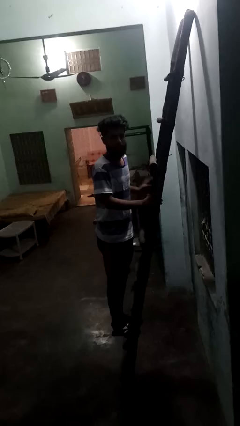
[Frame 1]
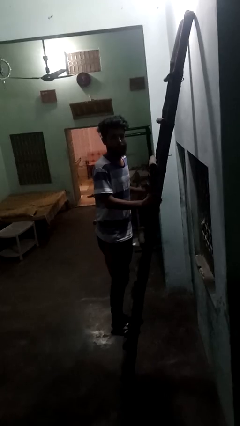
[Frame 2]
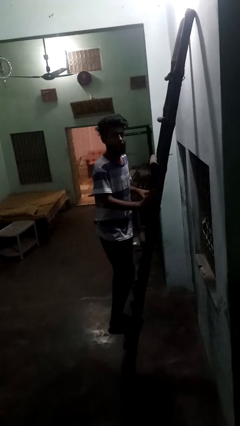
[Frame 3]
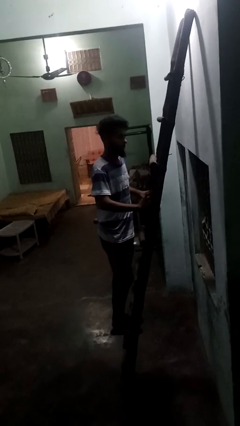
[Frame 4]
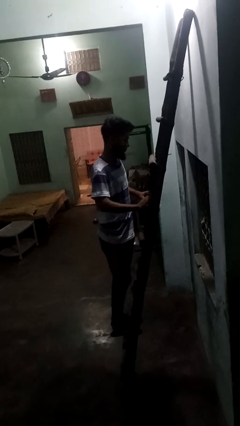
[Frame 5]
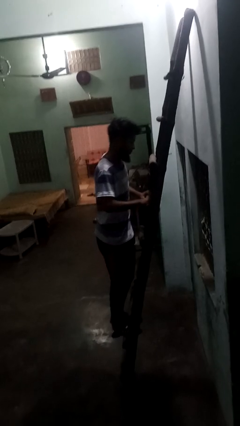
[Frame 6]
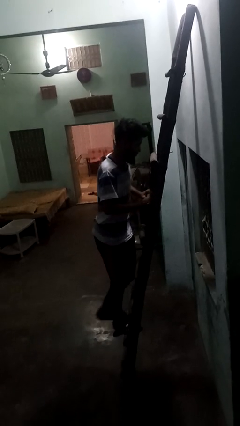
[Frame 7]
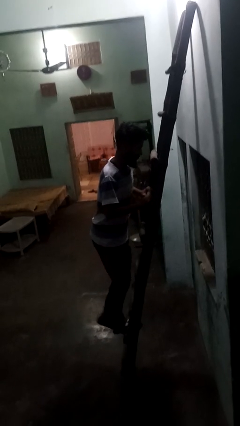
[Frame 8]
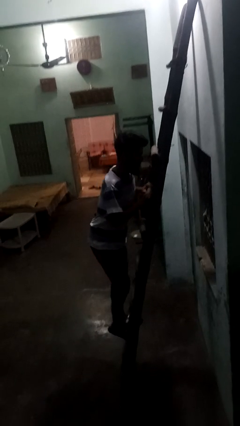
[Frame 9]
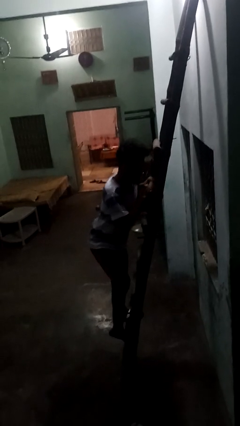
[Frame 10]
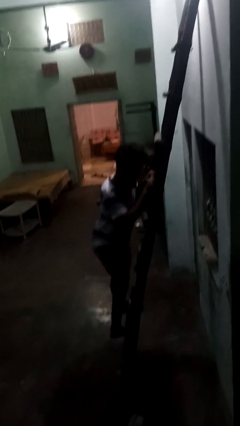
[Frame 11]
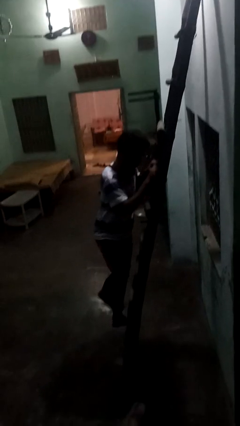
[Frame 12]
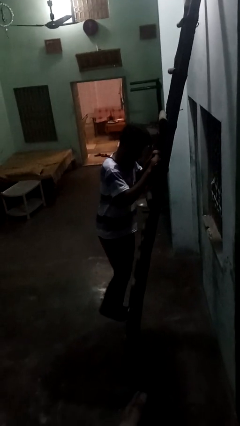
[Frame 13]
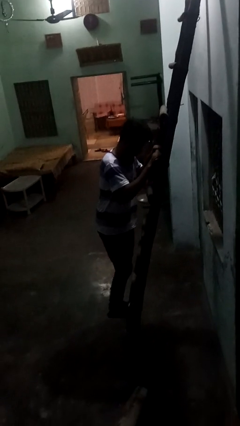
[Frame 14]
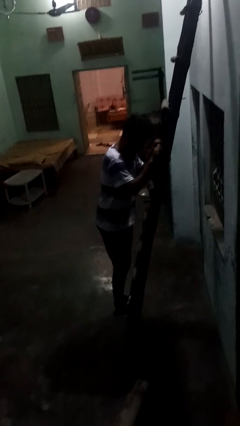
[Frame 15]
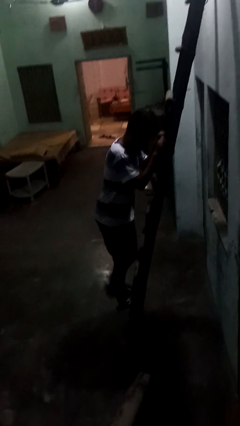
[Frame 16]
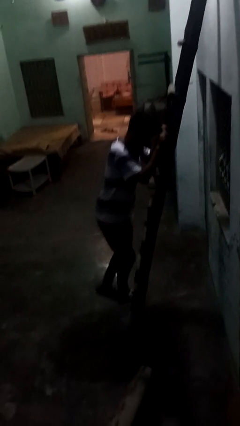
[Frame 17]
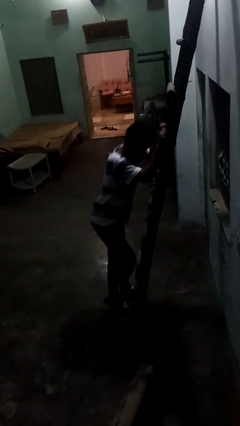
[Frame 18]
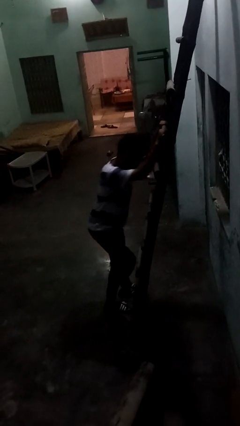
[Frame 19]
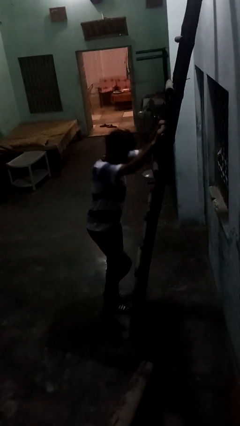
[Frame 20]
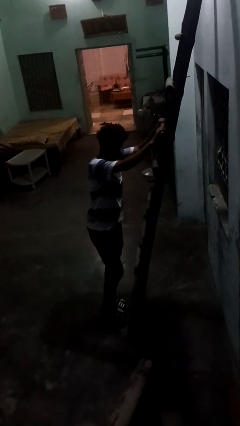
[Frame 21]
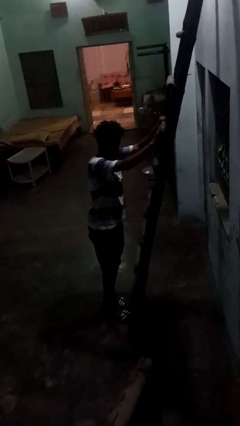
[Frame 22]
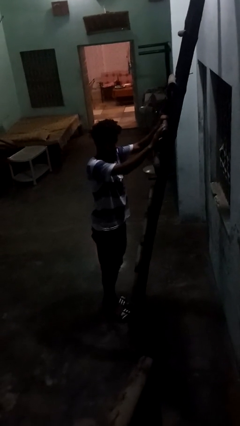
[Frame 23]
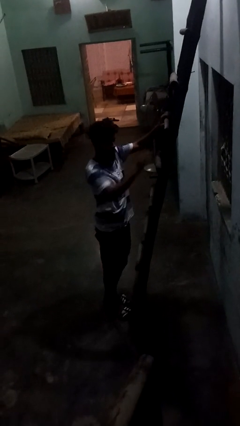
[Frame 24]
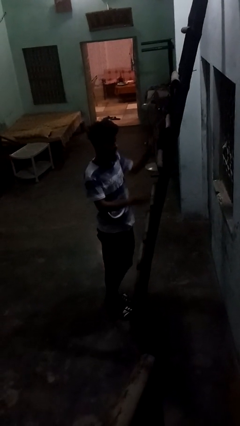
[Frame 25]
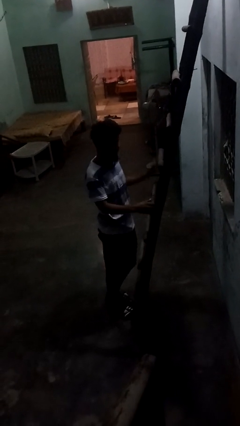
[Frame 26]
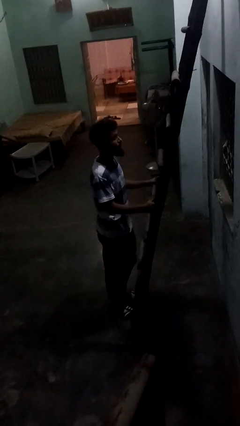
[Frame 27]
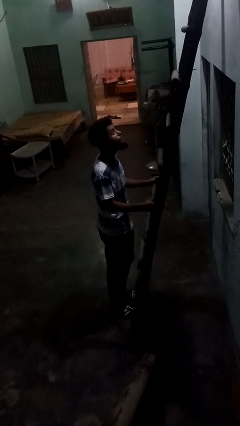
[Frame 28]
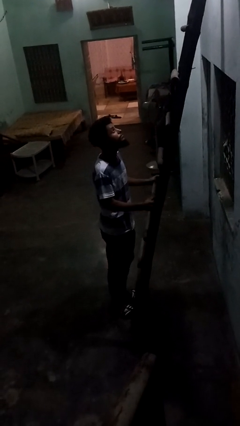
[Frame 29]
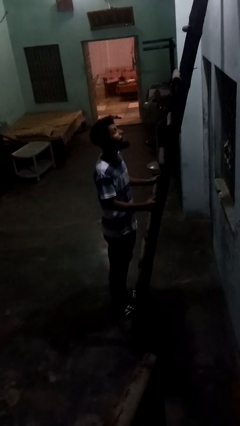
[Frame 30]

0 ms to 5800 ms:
person climbs down ladder

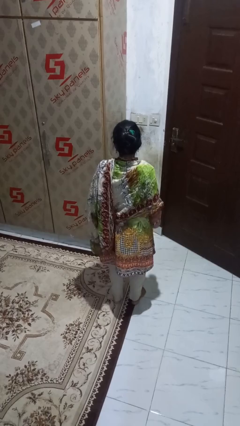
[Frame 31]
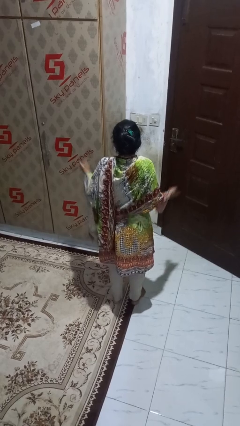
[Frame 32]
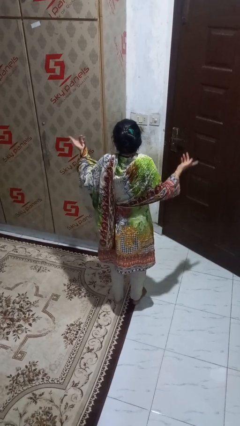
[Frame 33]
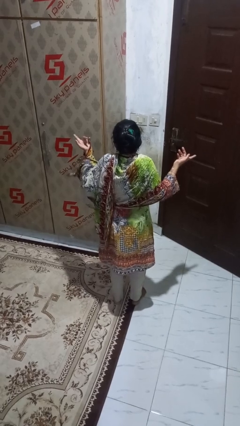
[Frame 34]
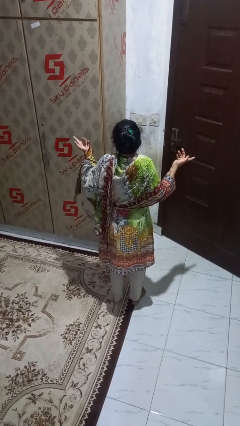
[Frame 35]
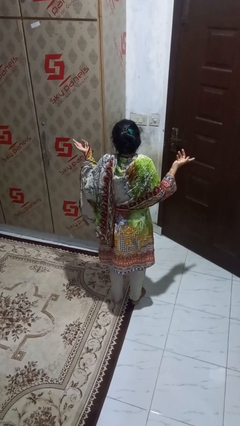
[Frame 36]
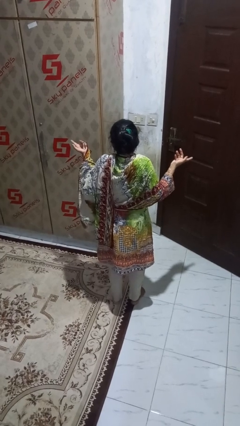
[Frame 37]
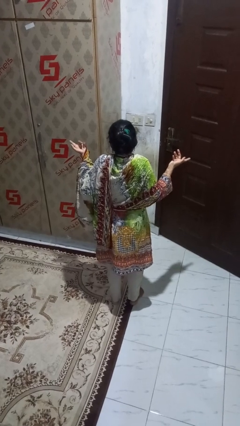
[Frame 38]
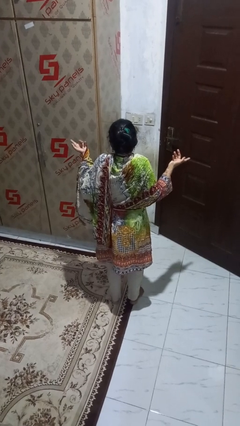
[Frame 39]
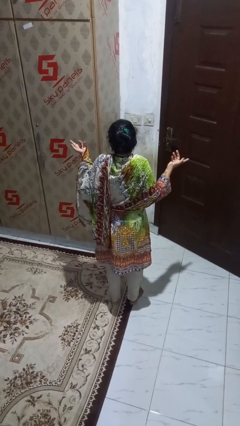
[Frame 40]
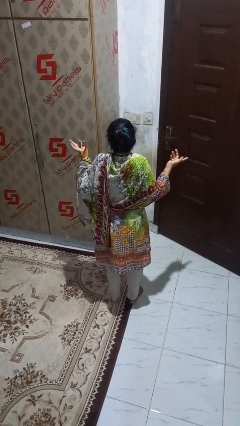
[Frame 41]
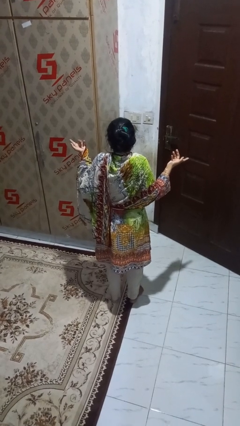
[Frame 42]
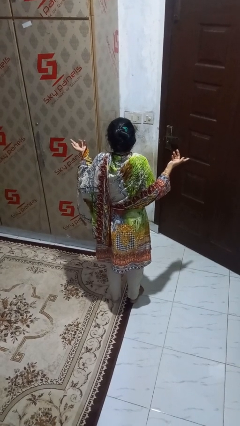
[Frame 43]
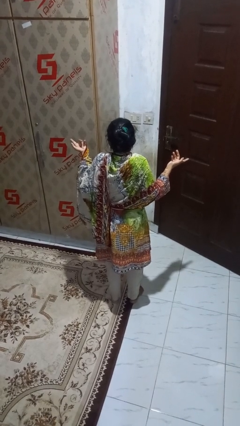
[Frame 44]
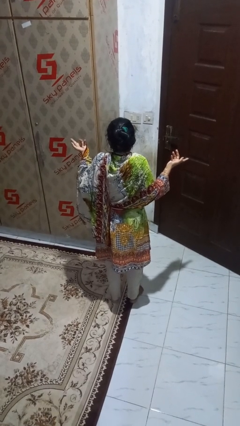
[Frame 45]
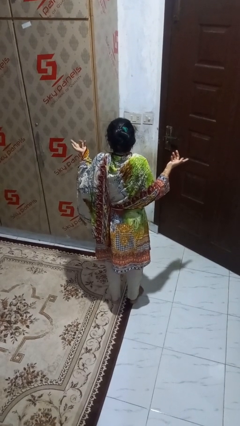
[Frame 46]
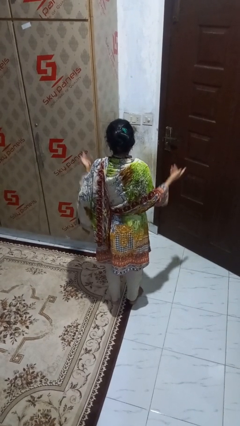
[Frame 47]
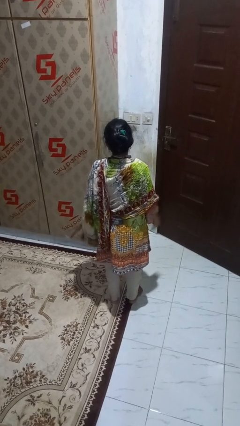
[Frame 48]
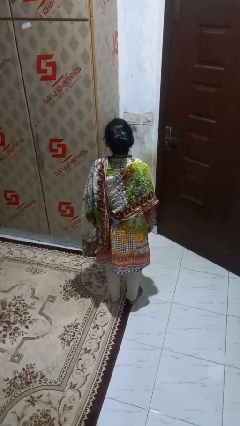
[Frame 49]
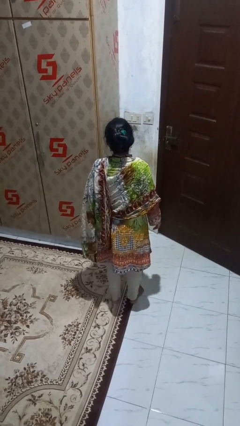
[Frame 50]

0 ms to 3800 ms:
person shrugs

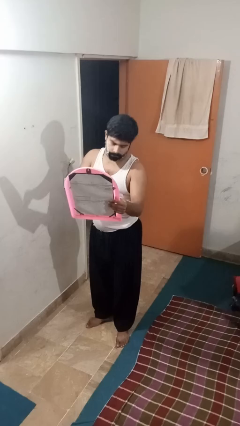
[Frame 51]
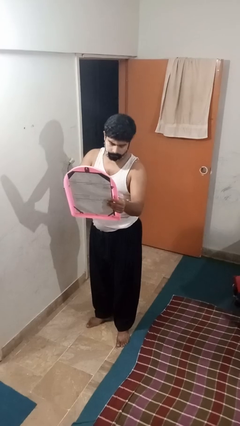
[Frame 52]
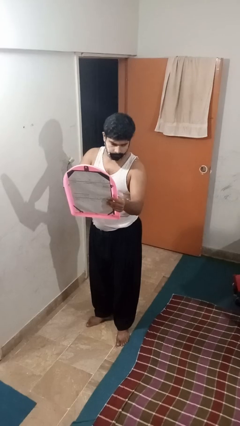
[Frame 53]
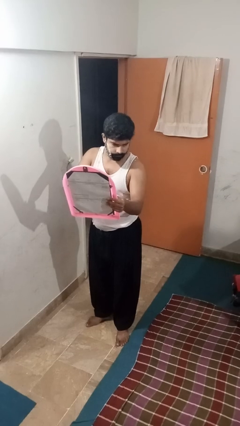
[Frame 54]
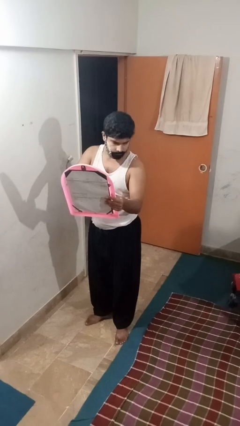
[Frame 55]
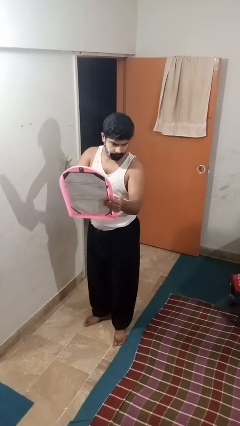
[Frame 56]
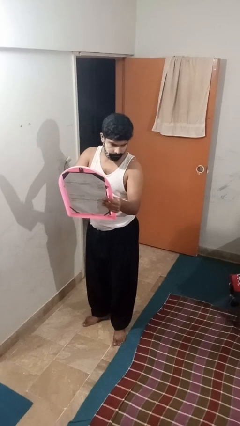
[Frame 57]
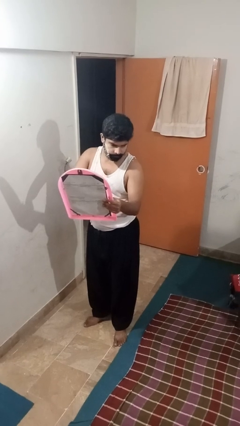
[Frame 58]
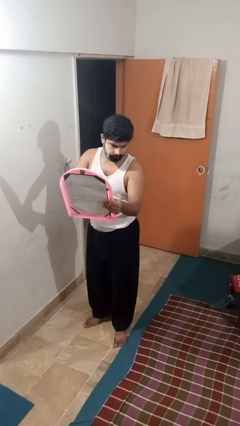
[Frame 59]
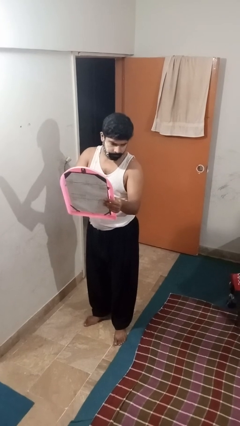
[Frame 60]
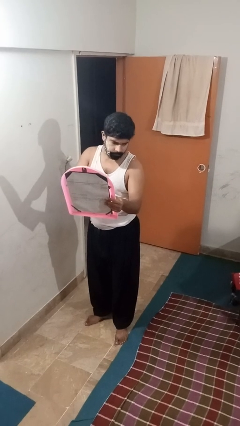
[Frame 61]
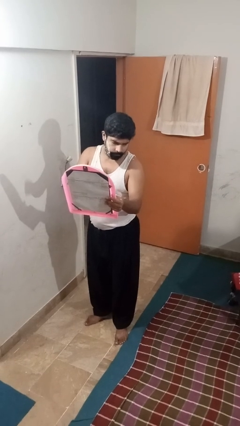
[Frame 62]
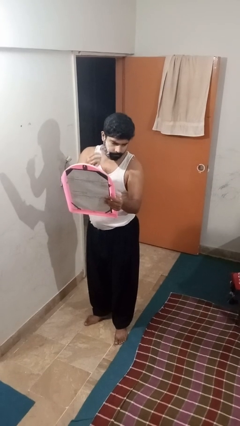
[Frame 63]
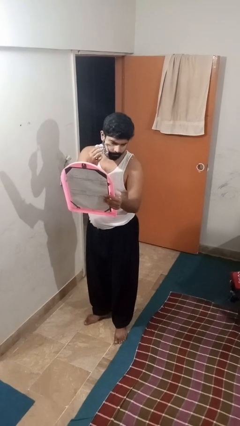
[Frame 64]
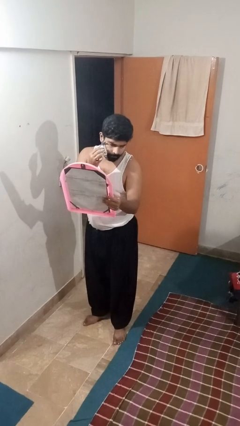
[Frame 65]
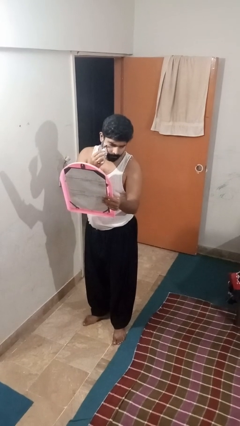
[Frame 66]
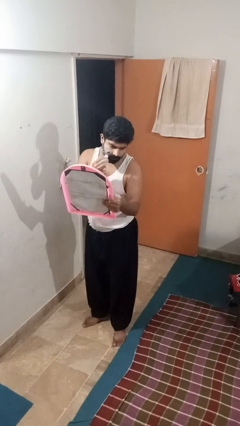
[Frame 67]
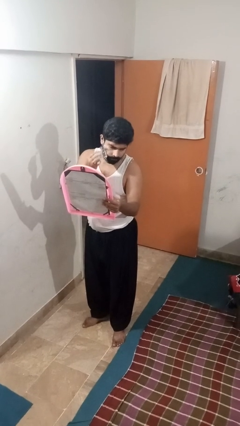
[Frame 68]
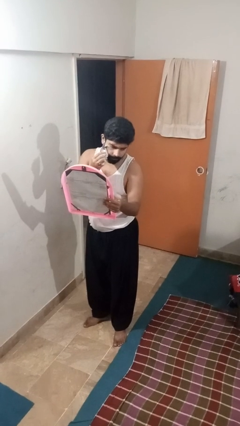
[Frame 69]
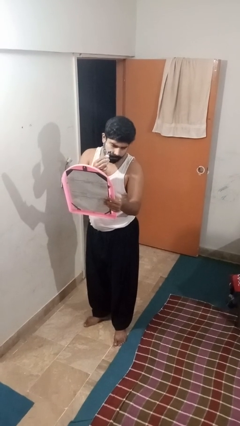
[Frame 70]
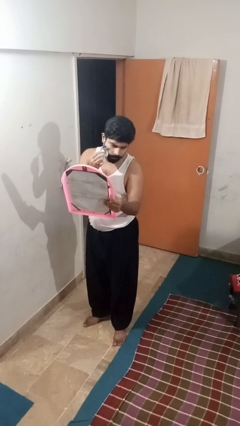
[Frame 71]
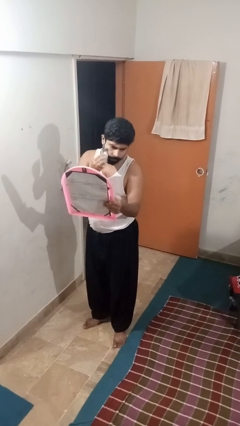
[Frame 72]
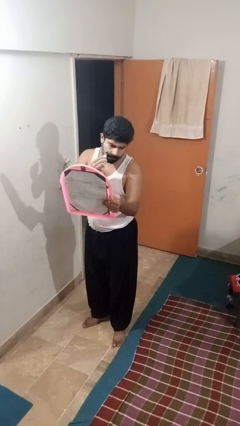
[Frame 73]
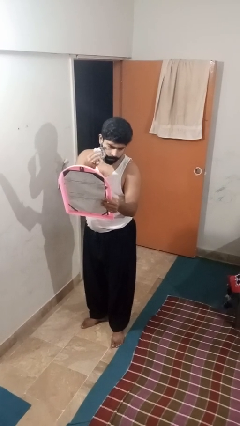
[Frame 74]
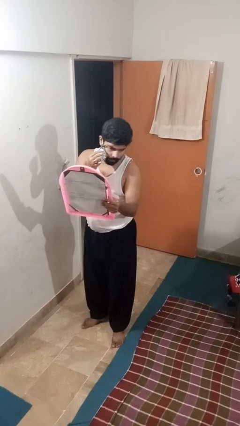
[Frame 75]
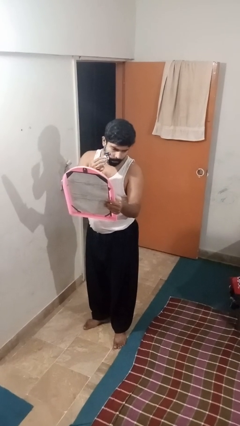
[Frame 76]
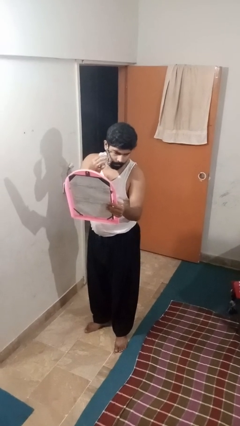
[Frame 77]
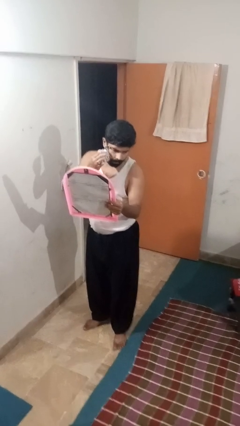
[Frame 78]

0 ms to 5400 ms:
person shaves face

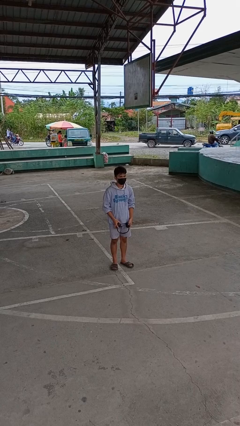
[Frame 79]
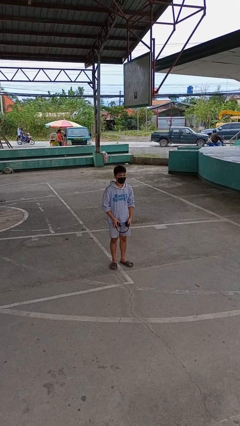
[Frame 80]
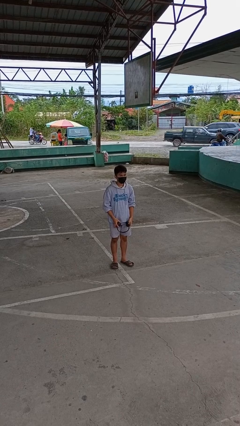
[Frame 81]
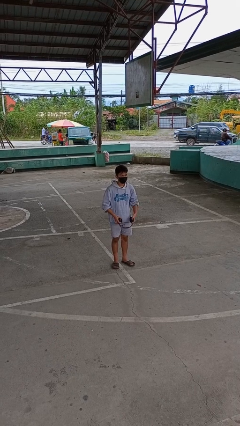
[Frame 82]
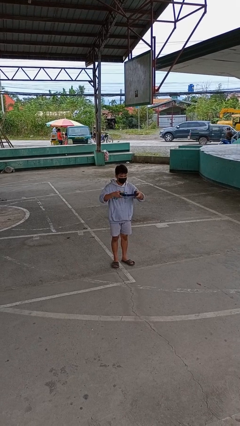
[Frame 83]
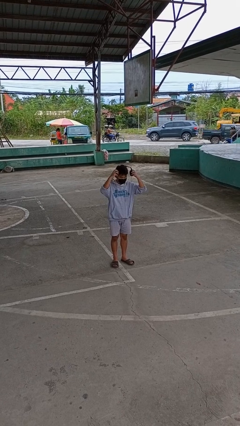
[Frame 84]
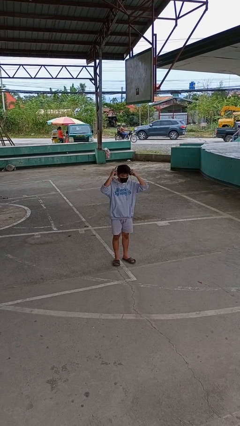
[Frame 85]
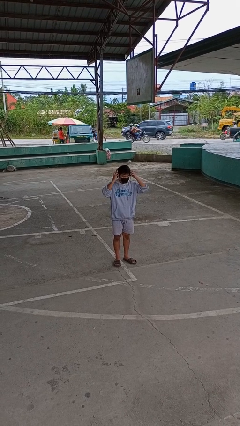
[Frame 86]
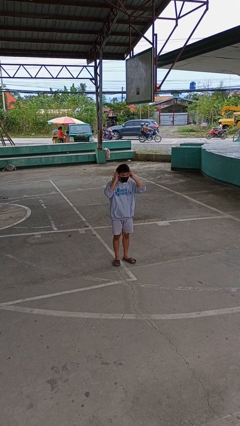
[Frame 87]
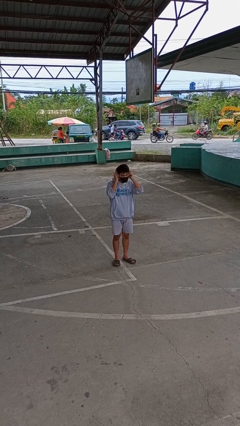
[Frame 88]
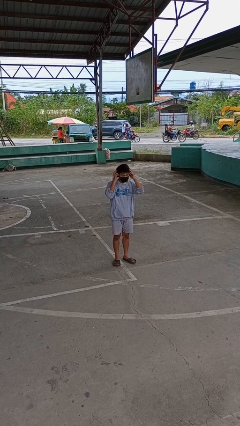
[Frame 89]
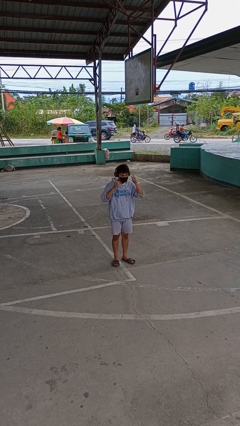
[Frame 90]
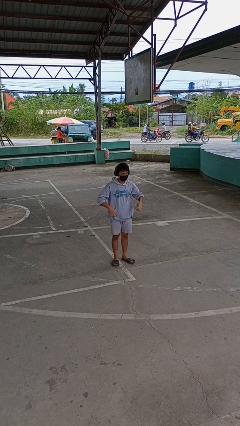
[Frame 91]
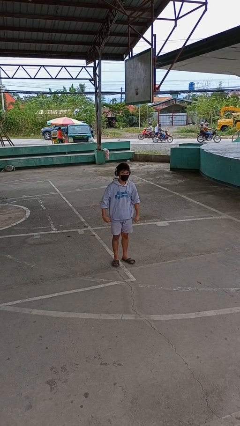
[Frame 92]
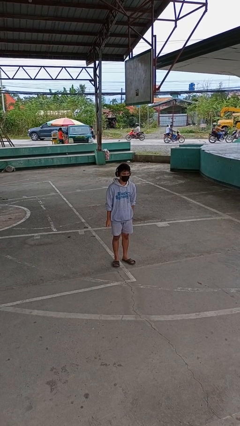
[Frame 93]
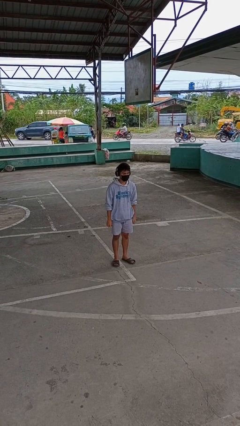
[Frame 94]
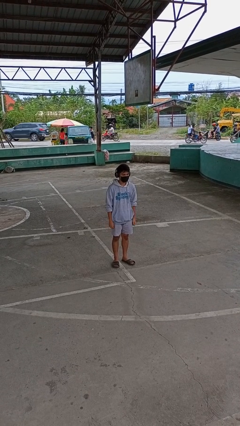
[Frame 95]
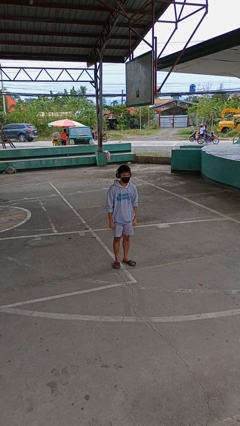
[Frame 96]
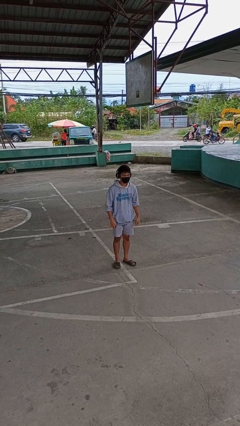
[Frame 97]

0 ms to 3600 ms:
person puts on headphones
